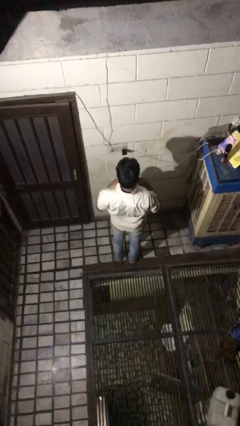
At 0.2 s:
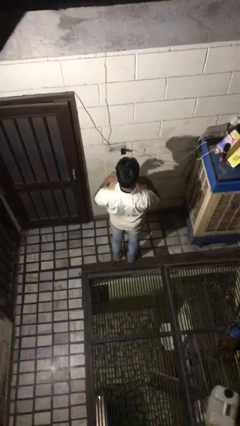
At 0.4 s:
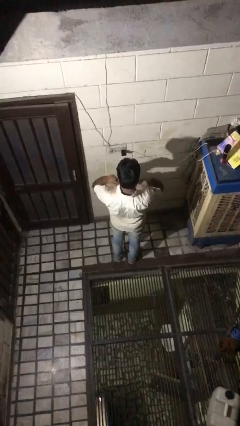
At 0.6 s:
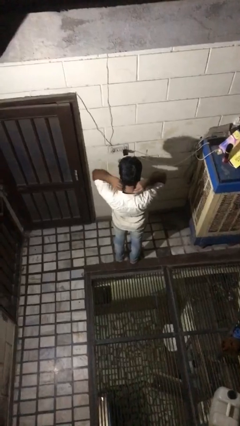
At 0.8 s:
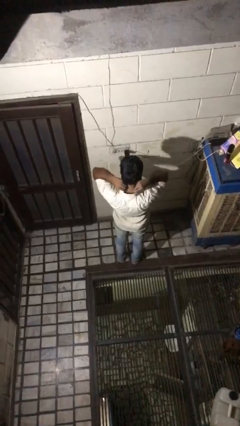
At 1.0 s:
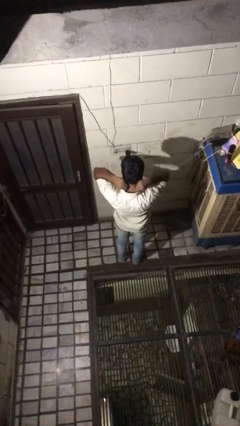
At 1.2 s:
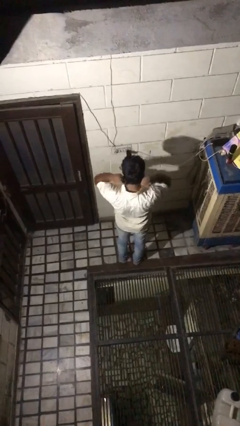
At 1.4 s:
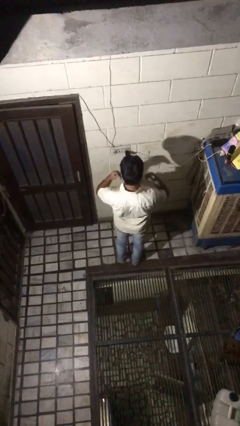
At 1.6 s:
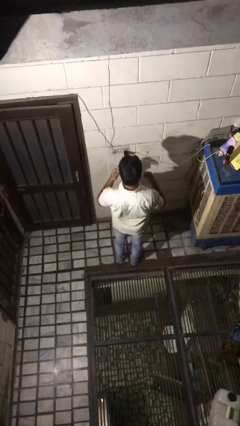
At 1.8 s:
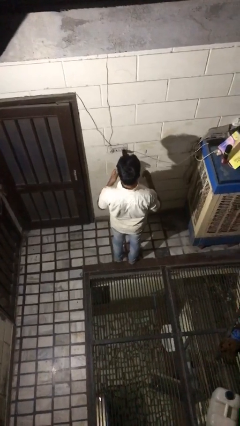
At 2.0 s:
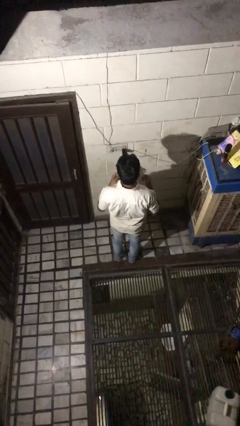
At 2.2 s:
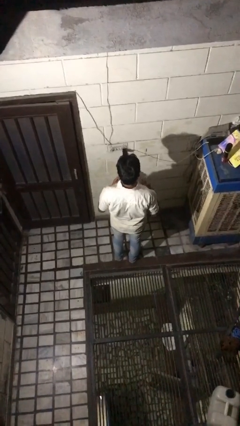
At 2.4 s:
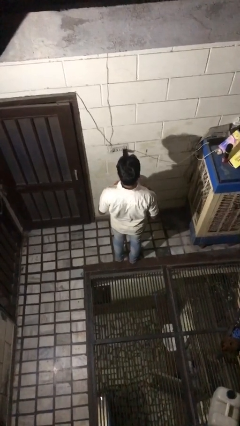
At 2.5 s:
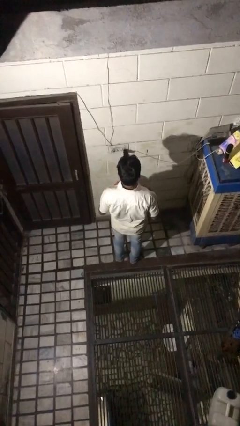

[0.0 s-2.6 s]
person takes off necklace

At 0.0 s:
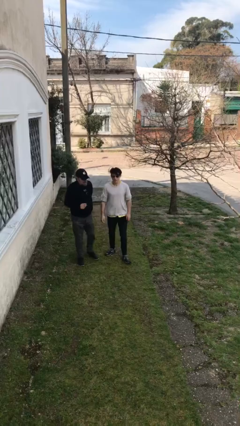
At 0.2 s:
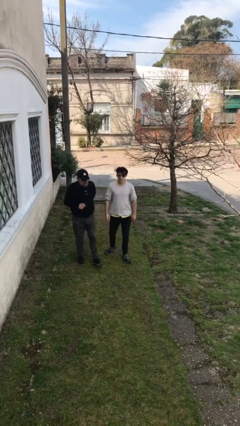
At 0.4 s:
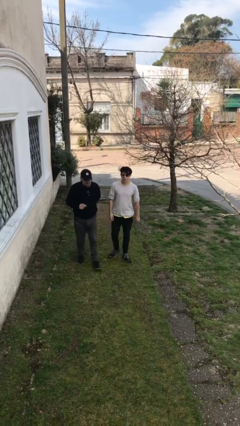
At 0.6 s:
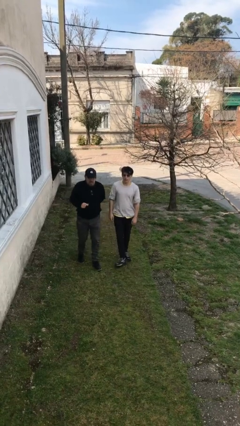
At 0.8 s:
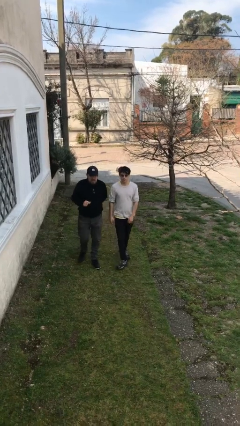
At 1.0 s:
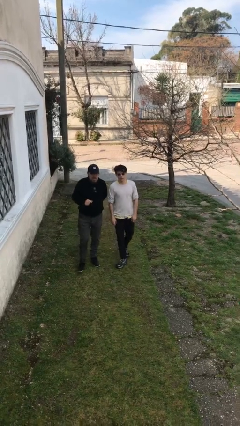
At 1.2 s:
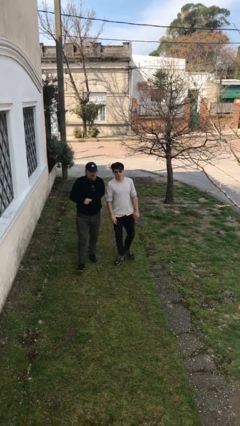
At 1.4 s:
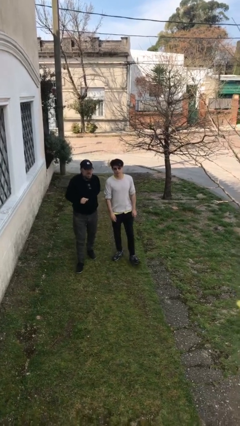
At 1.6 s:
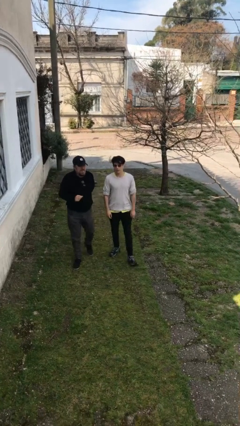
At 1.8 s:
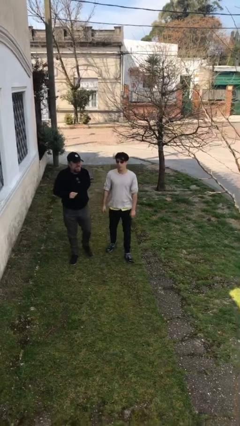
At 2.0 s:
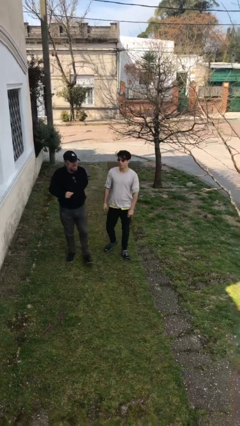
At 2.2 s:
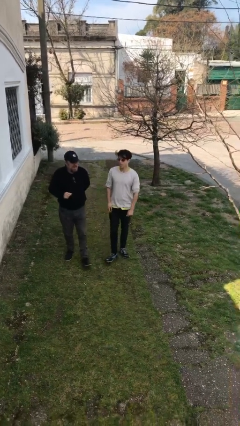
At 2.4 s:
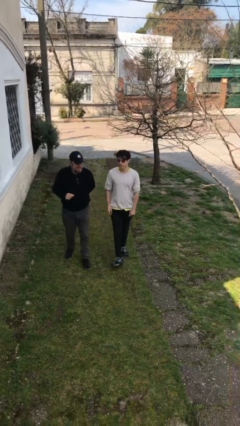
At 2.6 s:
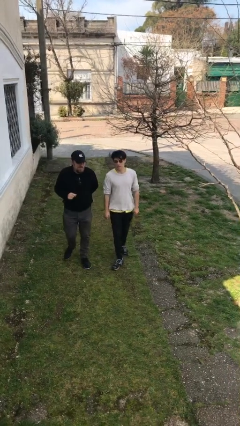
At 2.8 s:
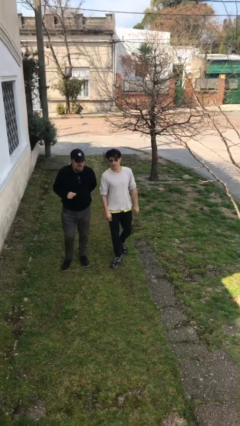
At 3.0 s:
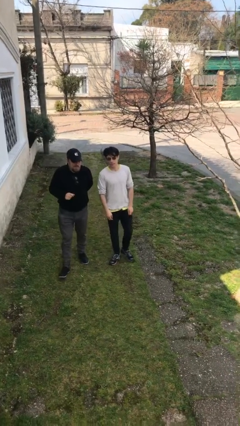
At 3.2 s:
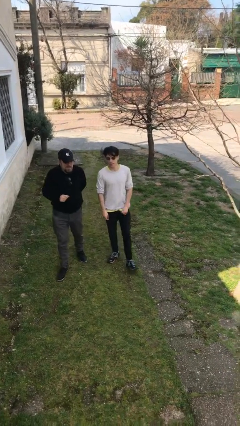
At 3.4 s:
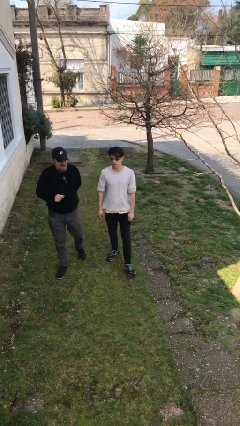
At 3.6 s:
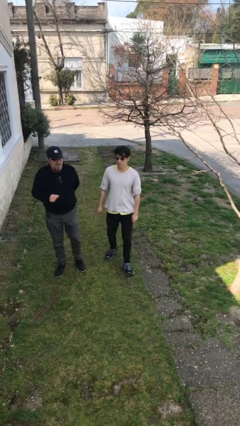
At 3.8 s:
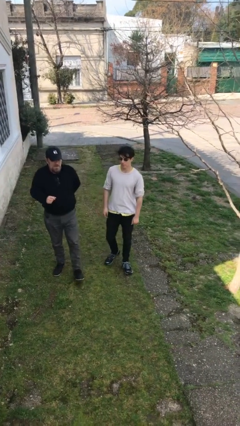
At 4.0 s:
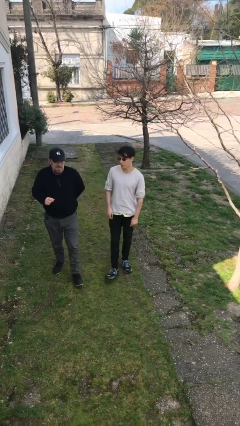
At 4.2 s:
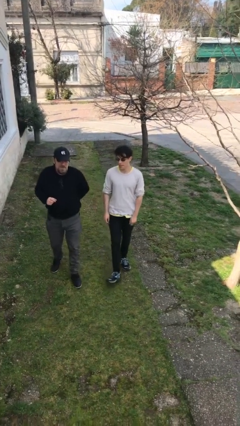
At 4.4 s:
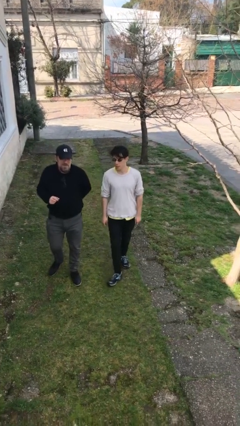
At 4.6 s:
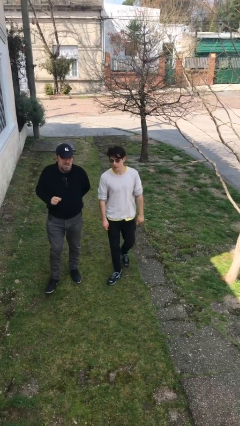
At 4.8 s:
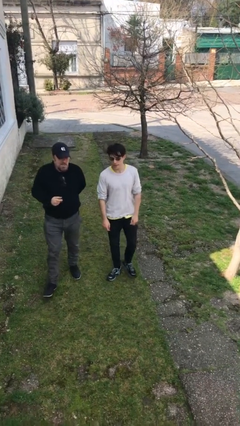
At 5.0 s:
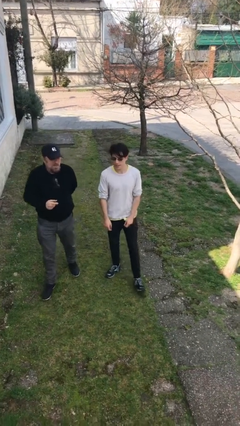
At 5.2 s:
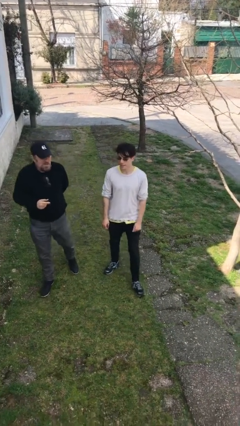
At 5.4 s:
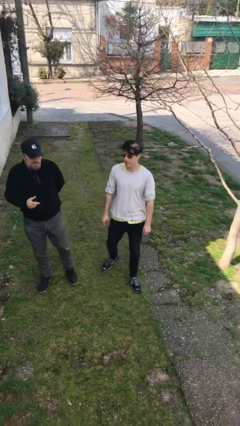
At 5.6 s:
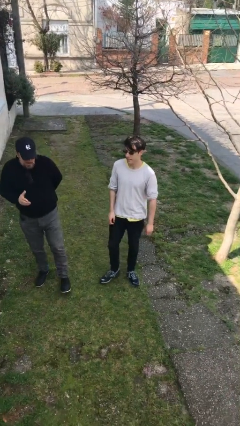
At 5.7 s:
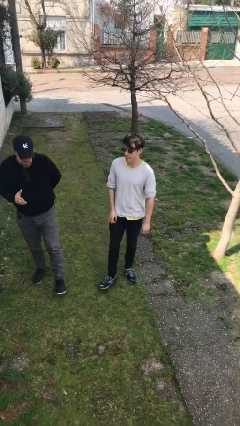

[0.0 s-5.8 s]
person talks to person

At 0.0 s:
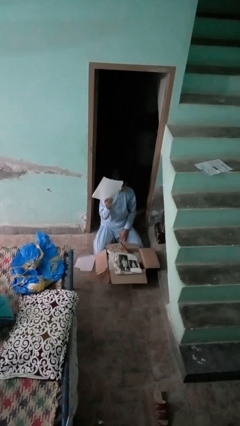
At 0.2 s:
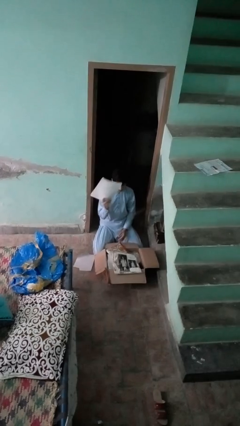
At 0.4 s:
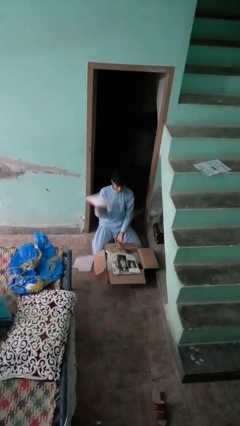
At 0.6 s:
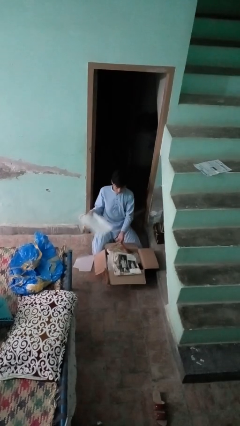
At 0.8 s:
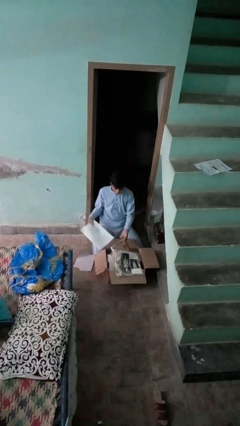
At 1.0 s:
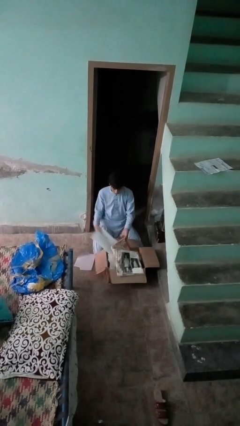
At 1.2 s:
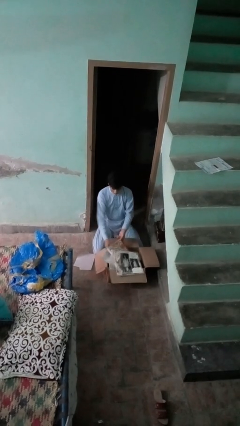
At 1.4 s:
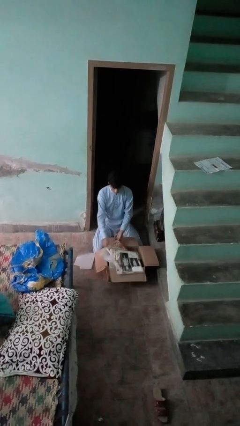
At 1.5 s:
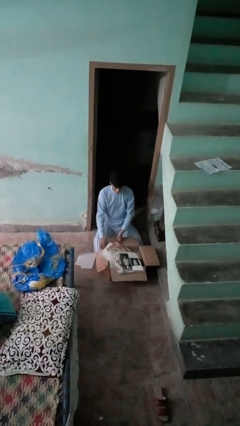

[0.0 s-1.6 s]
person puts object into box

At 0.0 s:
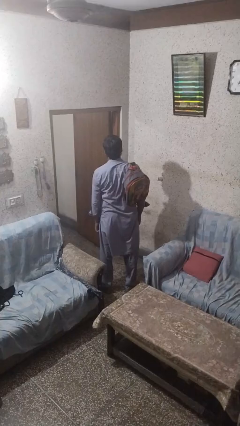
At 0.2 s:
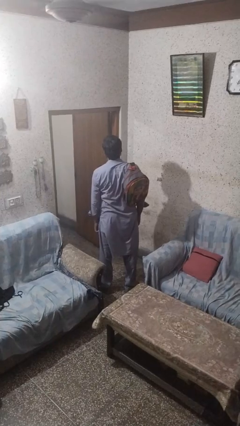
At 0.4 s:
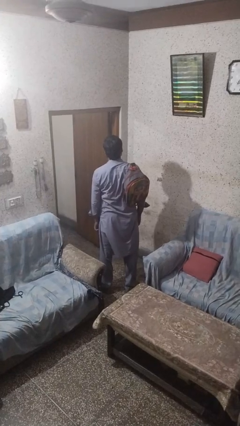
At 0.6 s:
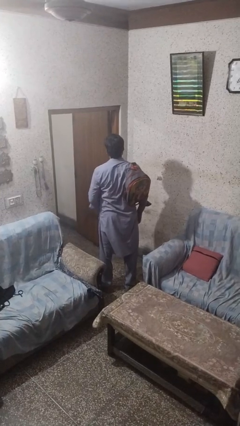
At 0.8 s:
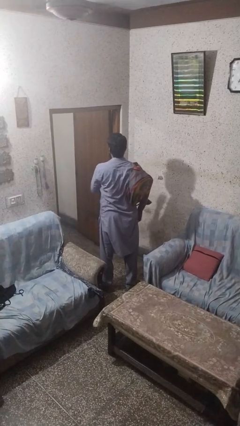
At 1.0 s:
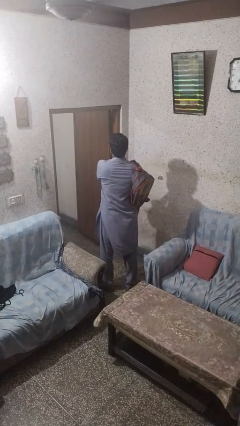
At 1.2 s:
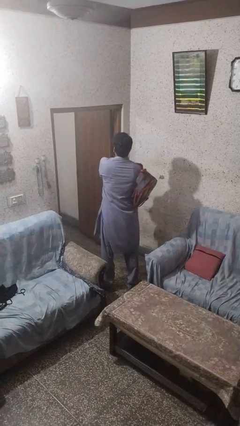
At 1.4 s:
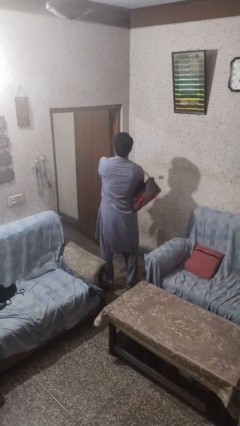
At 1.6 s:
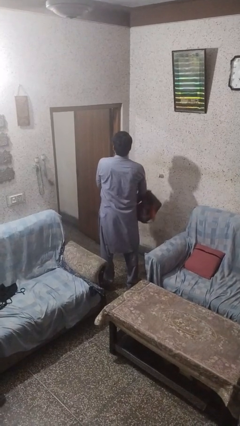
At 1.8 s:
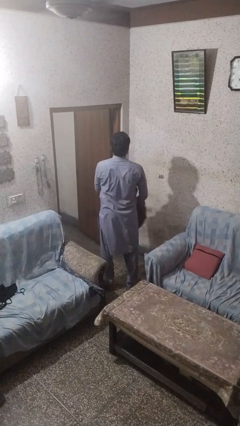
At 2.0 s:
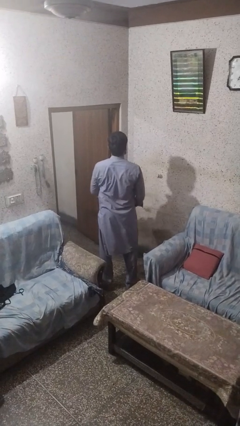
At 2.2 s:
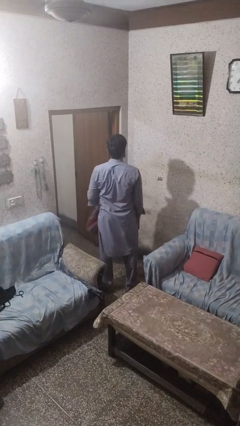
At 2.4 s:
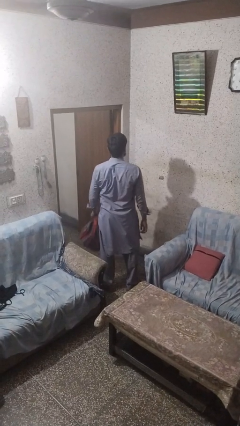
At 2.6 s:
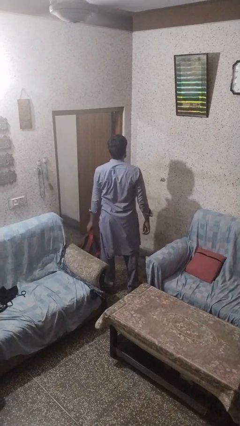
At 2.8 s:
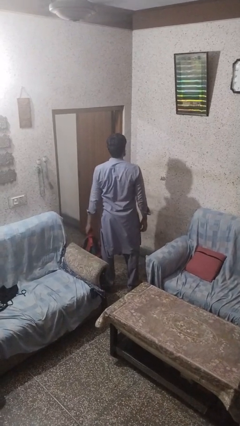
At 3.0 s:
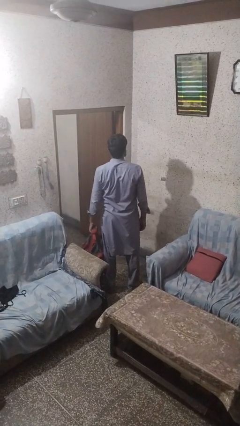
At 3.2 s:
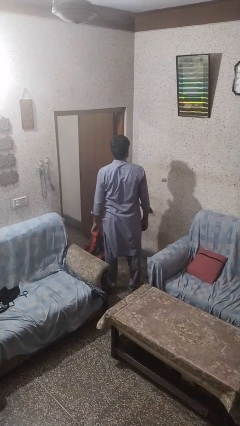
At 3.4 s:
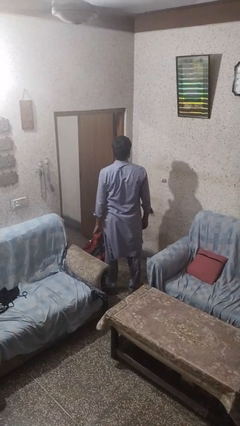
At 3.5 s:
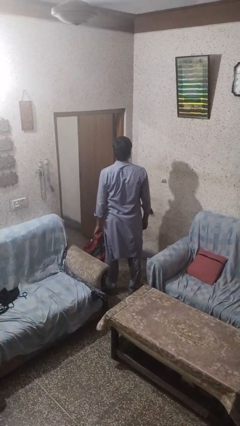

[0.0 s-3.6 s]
person takes off backpack

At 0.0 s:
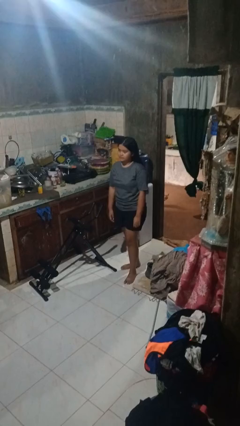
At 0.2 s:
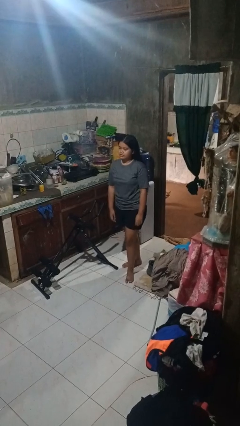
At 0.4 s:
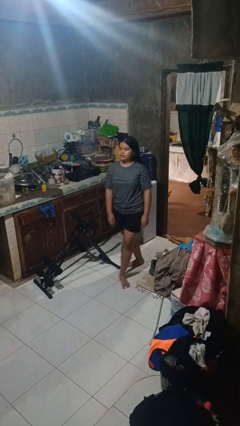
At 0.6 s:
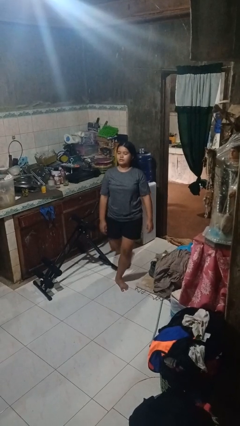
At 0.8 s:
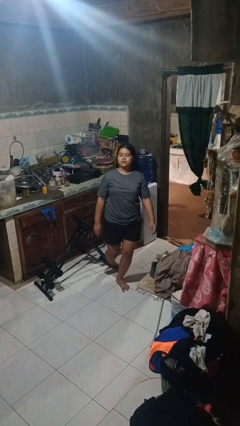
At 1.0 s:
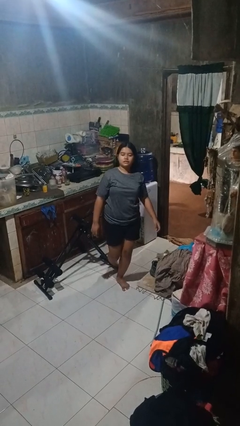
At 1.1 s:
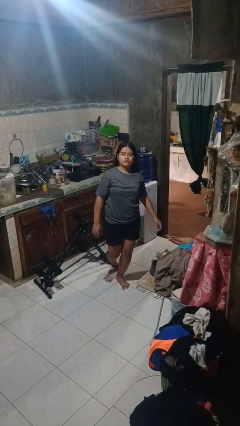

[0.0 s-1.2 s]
person trips on object on floor

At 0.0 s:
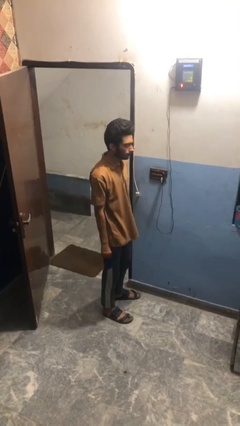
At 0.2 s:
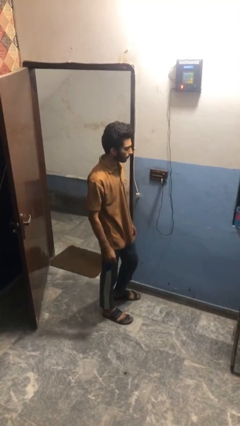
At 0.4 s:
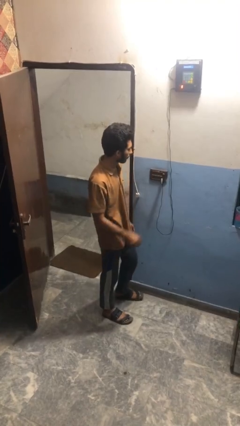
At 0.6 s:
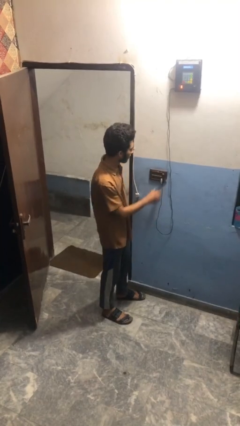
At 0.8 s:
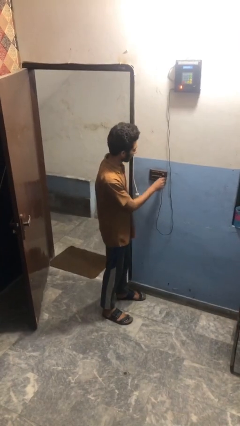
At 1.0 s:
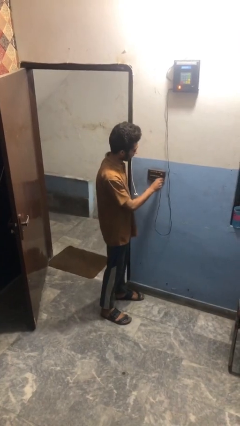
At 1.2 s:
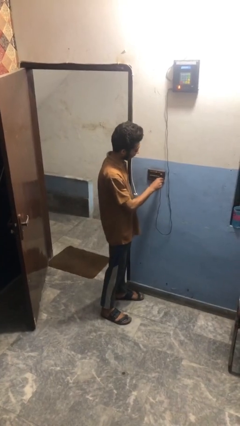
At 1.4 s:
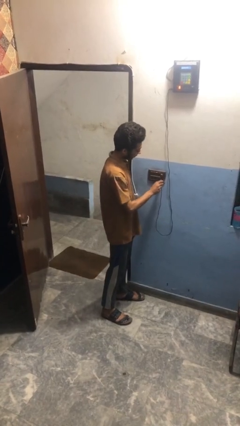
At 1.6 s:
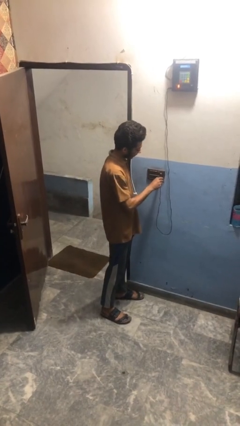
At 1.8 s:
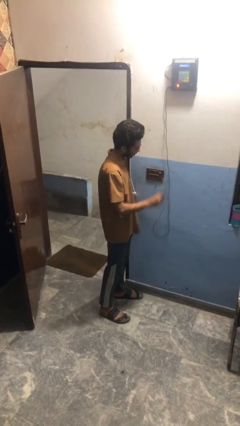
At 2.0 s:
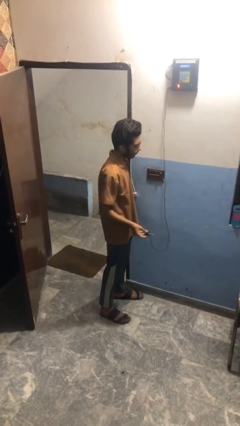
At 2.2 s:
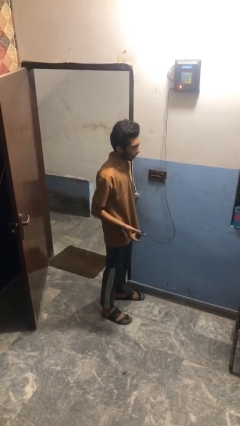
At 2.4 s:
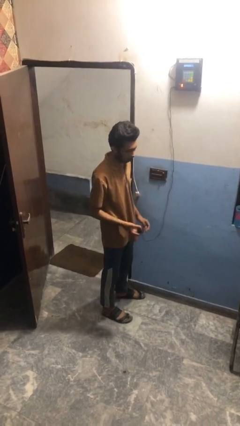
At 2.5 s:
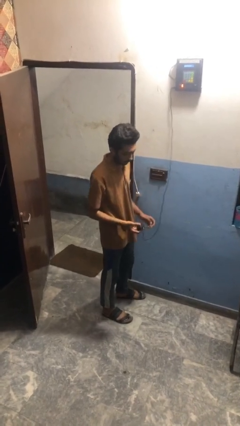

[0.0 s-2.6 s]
person unplugs from electrical socket
